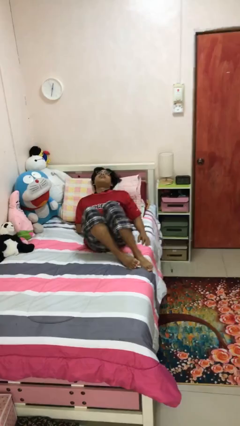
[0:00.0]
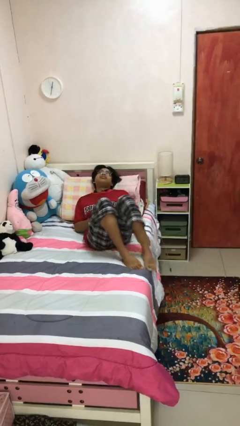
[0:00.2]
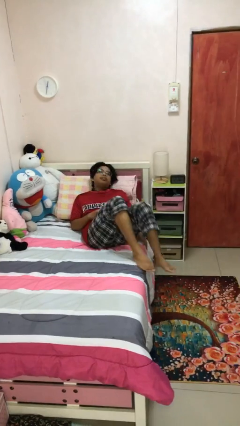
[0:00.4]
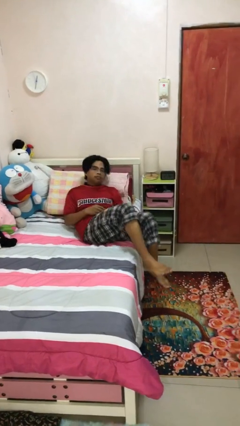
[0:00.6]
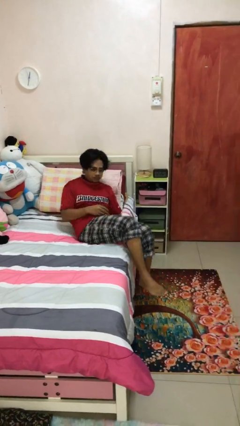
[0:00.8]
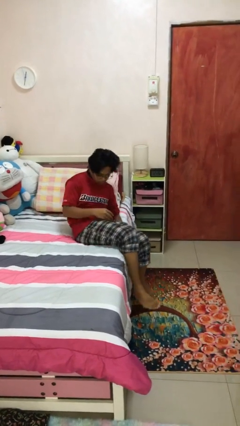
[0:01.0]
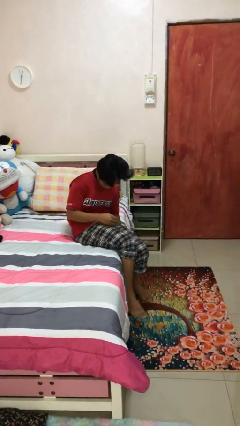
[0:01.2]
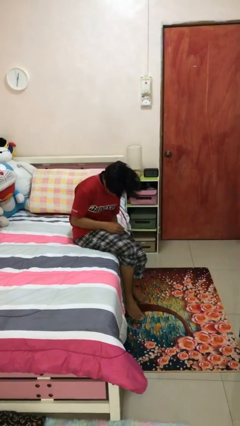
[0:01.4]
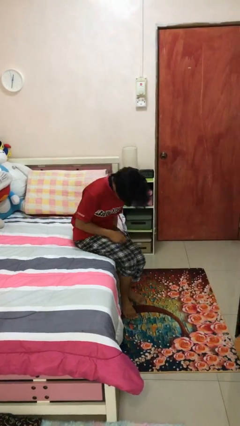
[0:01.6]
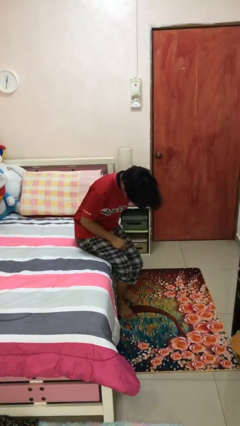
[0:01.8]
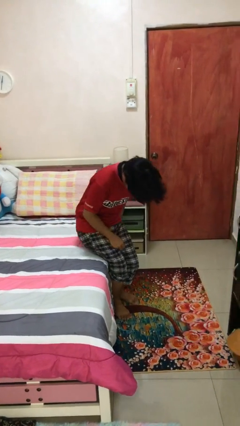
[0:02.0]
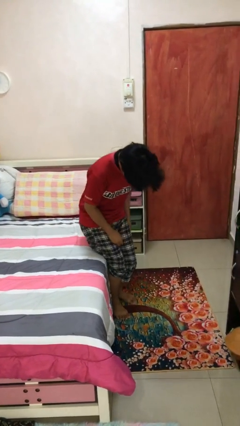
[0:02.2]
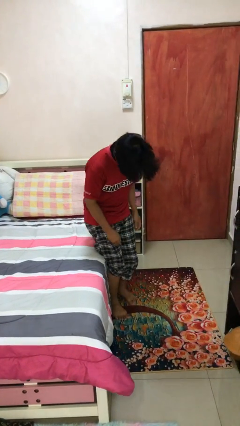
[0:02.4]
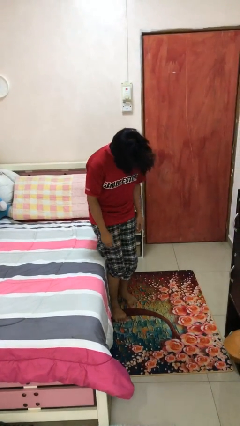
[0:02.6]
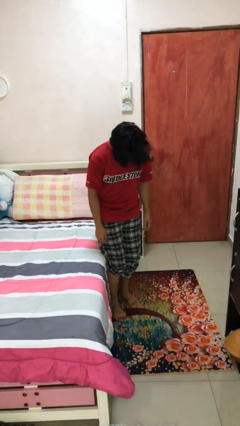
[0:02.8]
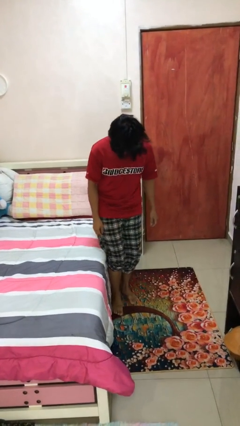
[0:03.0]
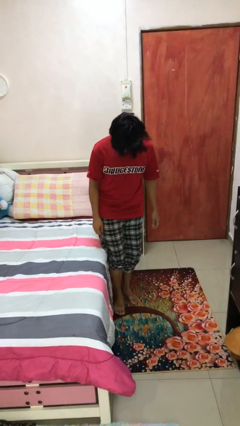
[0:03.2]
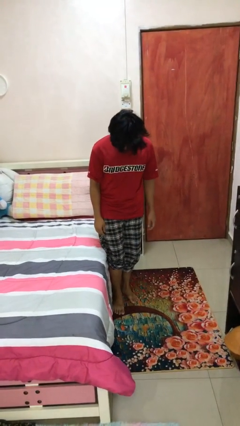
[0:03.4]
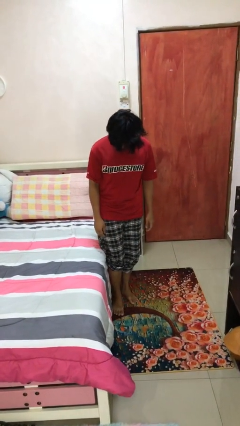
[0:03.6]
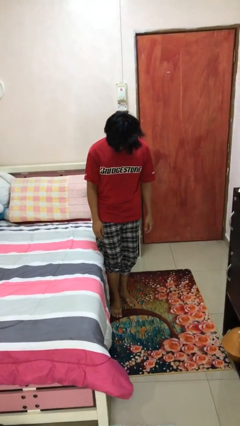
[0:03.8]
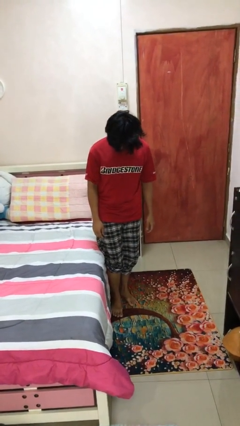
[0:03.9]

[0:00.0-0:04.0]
person stands up

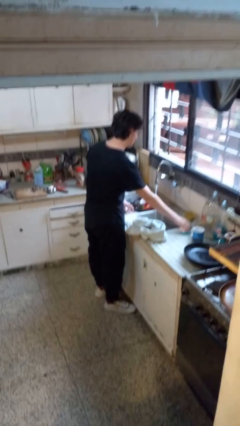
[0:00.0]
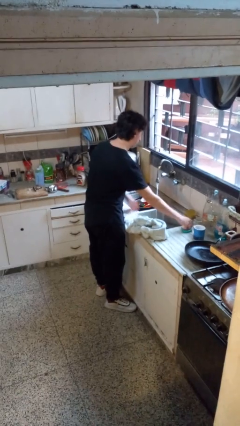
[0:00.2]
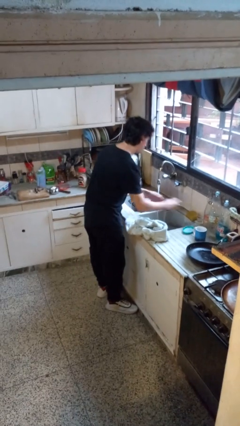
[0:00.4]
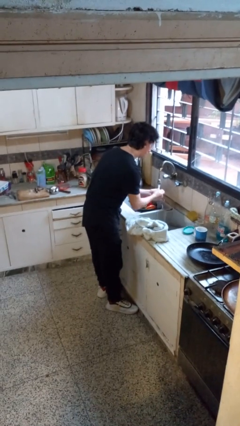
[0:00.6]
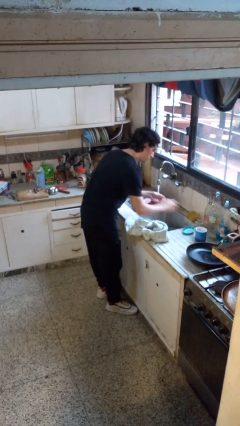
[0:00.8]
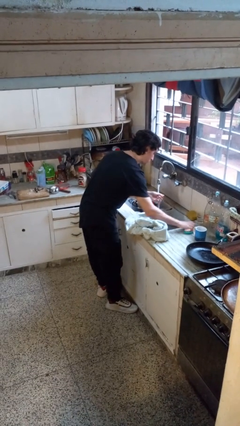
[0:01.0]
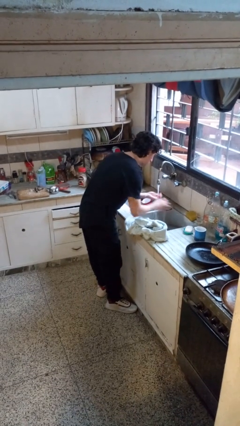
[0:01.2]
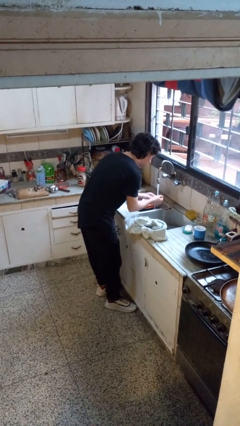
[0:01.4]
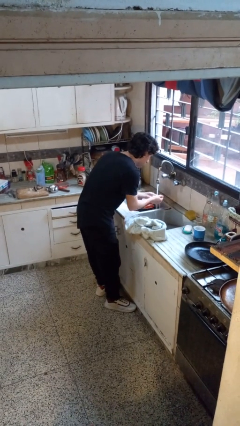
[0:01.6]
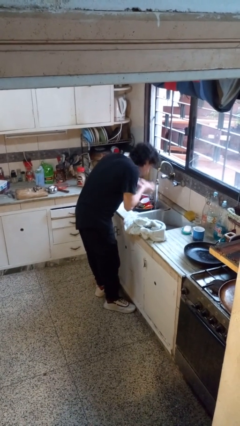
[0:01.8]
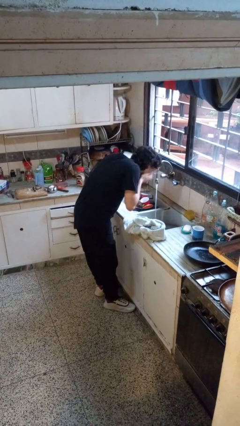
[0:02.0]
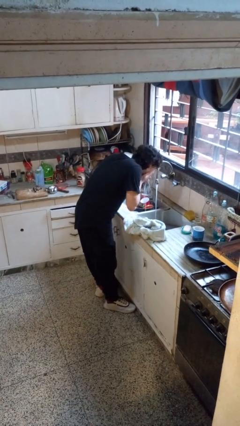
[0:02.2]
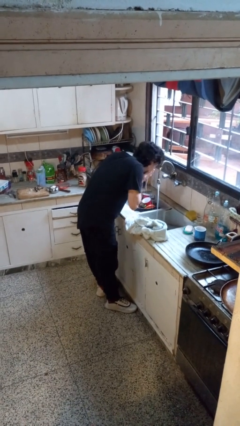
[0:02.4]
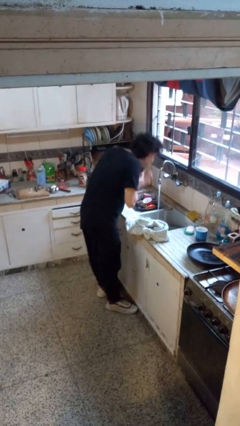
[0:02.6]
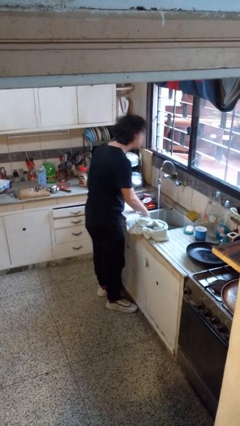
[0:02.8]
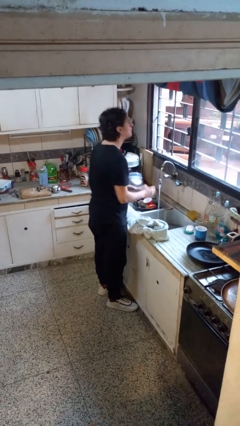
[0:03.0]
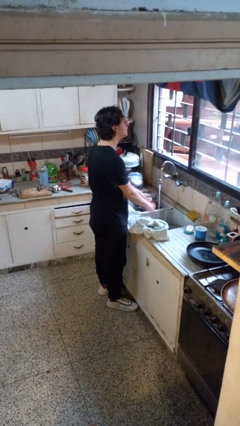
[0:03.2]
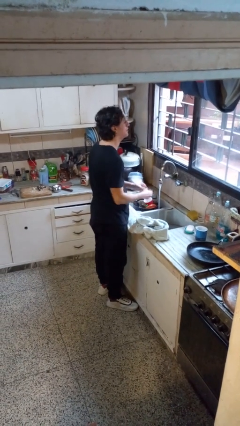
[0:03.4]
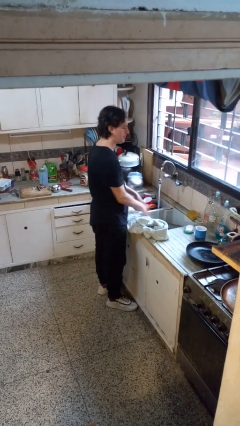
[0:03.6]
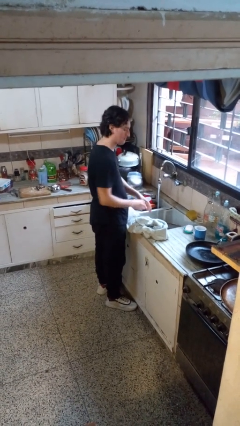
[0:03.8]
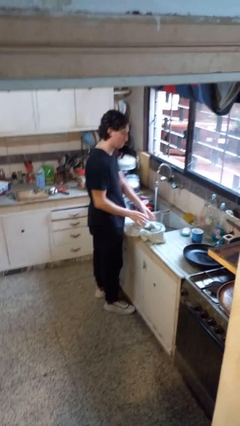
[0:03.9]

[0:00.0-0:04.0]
person washes face

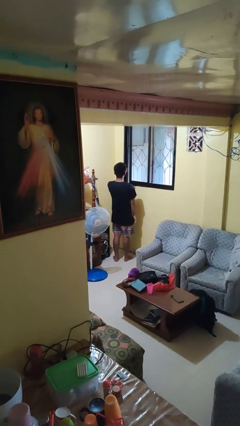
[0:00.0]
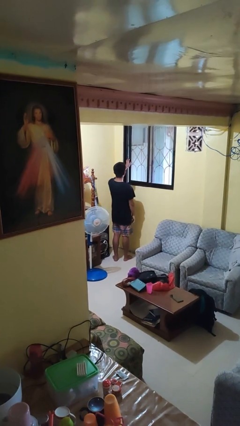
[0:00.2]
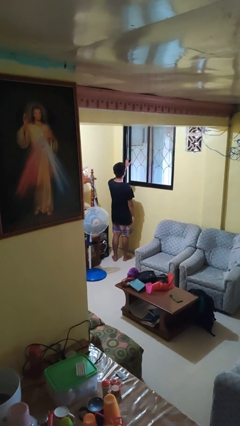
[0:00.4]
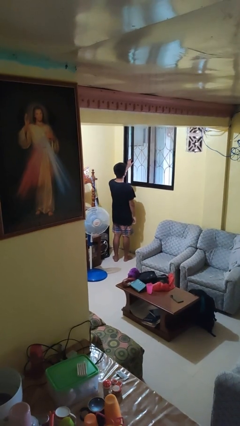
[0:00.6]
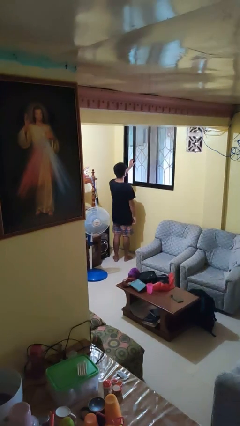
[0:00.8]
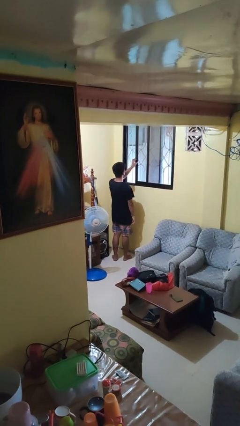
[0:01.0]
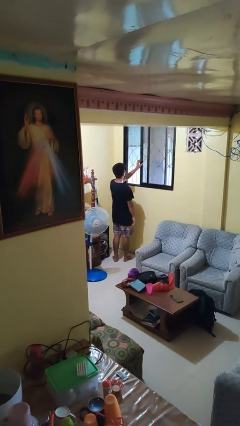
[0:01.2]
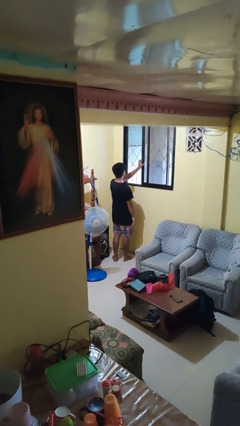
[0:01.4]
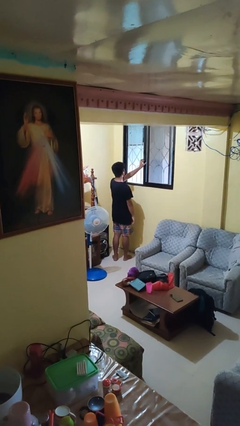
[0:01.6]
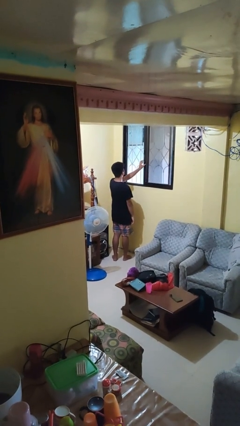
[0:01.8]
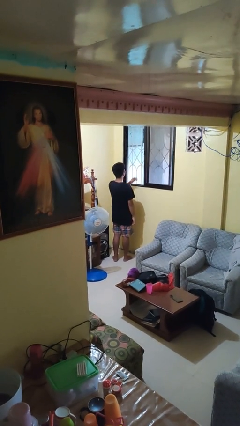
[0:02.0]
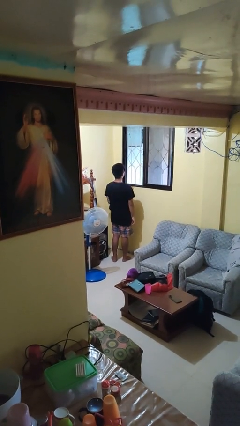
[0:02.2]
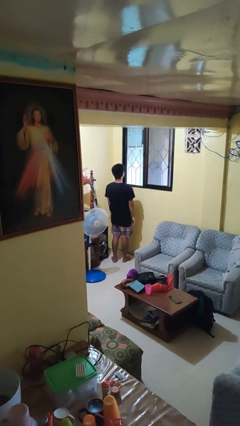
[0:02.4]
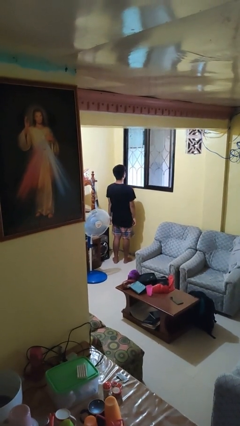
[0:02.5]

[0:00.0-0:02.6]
person opens home window

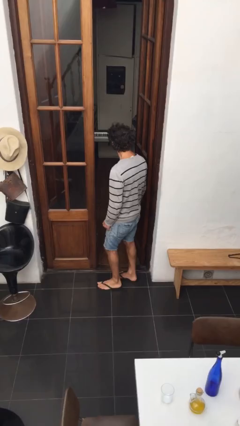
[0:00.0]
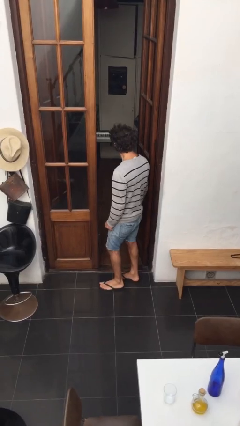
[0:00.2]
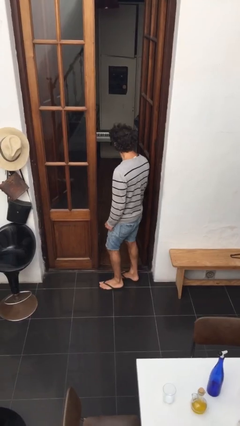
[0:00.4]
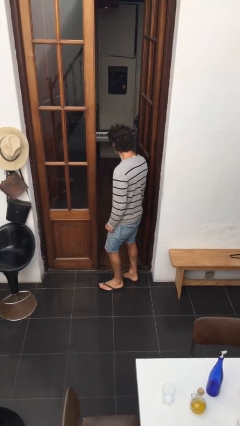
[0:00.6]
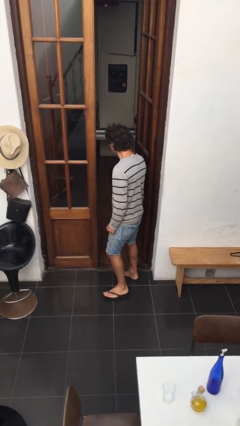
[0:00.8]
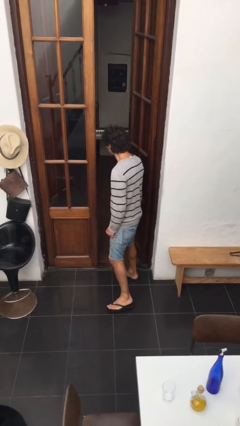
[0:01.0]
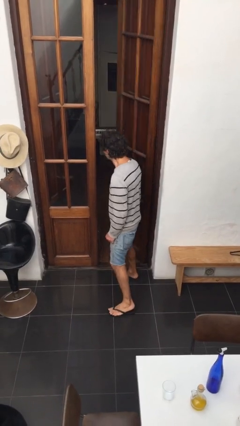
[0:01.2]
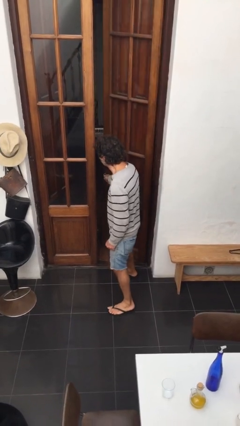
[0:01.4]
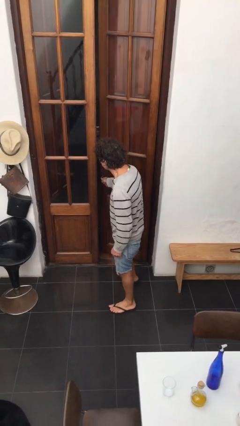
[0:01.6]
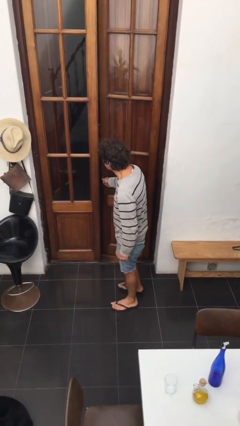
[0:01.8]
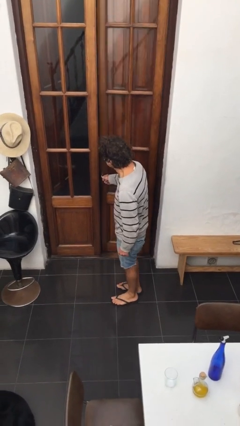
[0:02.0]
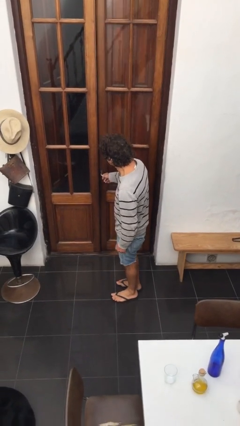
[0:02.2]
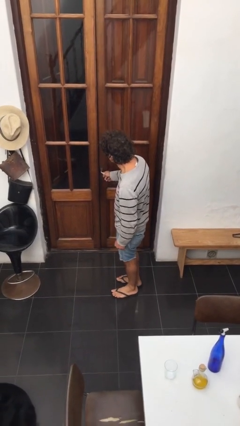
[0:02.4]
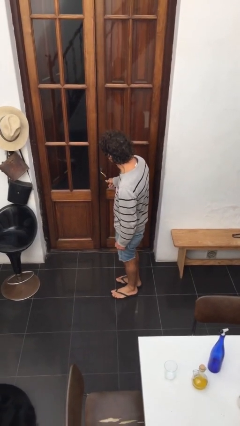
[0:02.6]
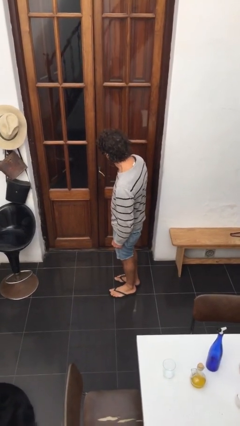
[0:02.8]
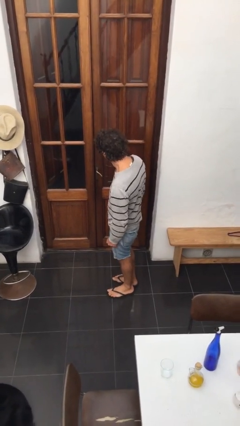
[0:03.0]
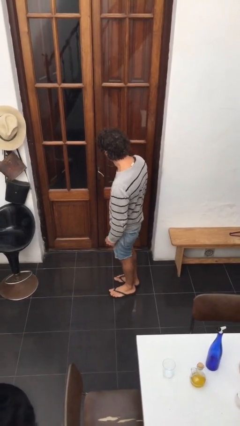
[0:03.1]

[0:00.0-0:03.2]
person closes facility door

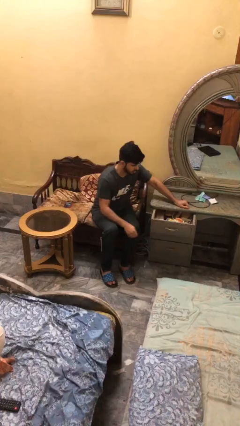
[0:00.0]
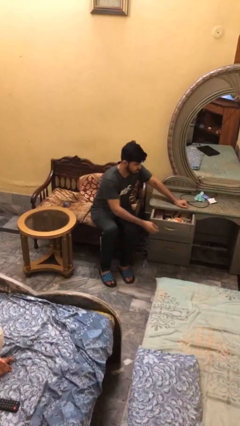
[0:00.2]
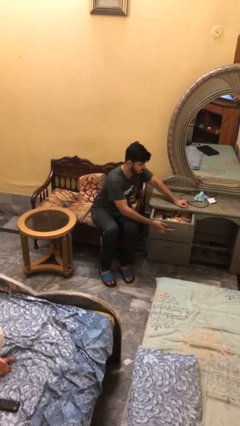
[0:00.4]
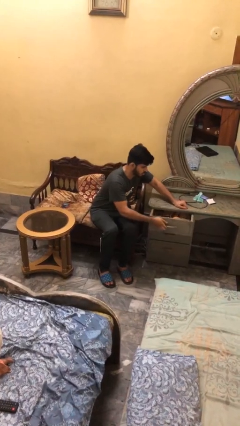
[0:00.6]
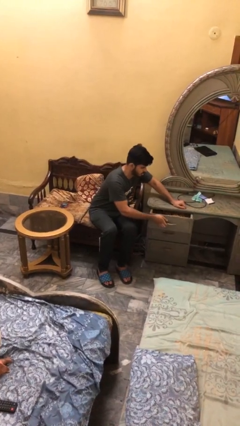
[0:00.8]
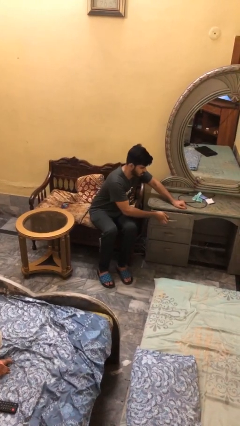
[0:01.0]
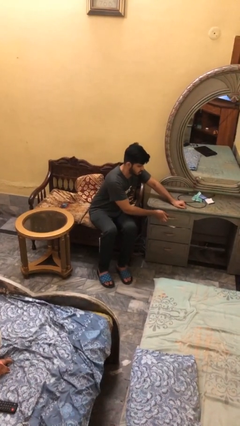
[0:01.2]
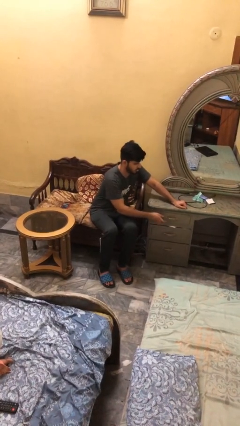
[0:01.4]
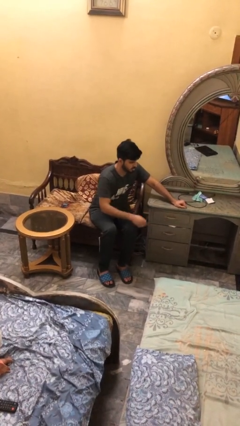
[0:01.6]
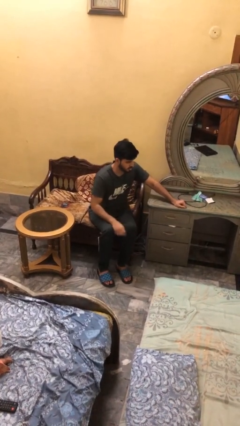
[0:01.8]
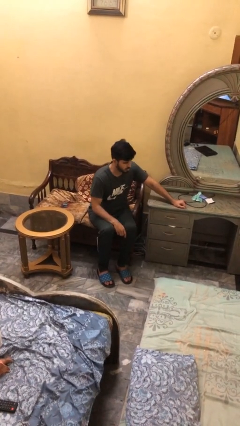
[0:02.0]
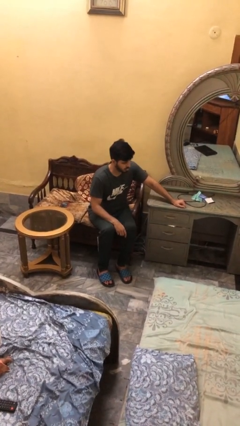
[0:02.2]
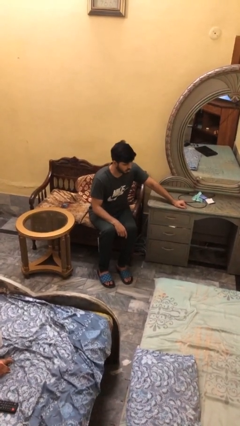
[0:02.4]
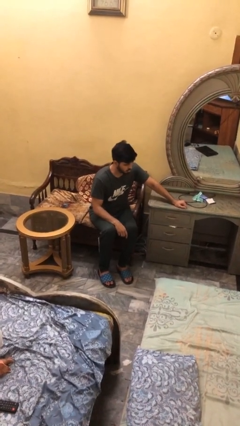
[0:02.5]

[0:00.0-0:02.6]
person closes dresser drawer

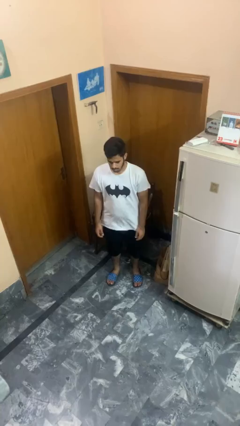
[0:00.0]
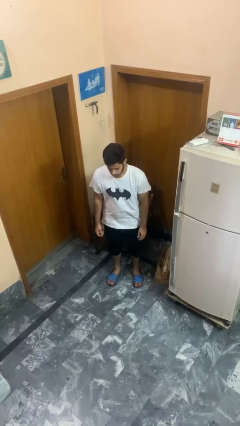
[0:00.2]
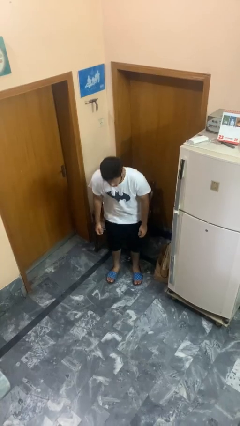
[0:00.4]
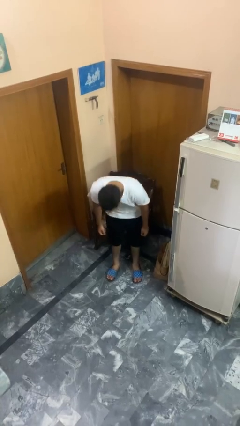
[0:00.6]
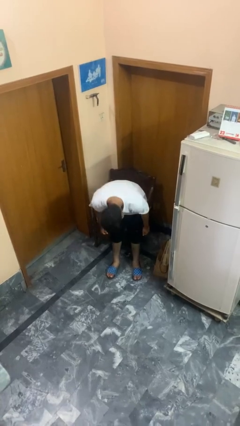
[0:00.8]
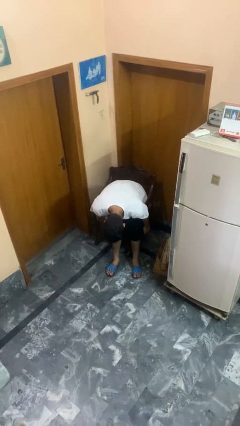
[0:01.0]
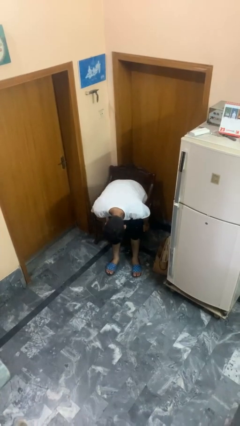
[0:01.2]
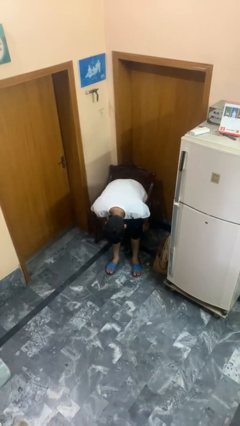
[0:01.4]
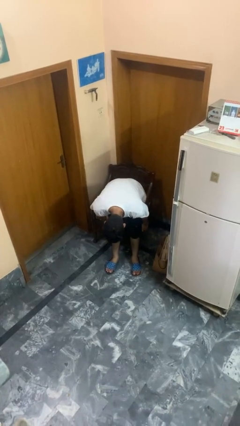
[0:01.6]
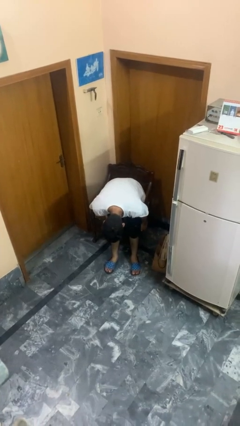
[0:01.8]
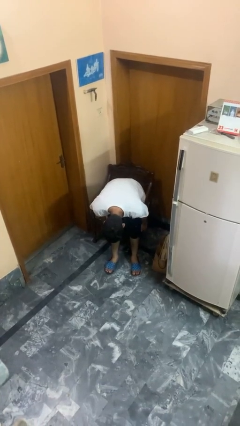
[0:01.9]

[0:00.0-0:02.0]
person bows
